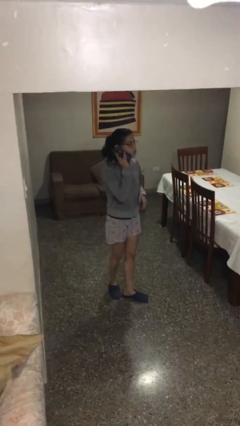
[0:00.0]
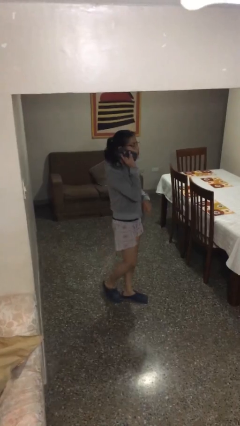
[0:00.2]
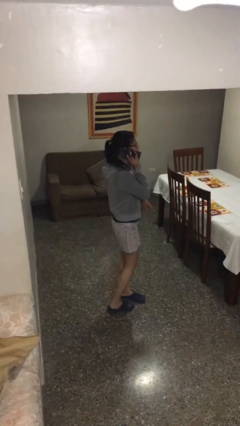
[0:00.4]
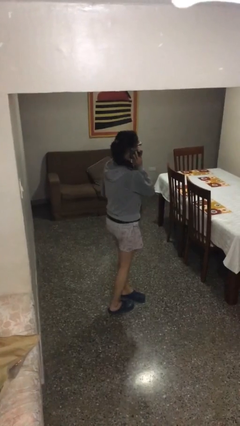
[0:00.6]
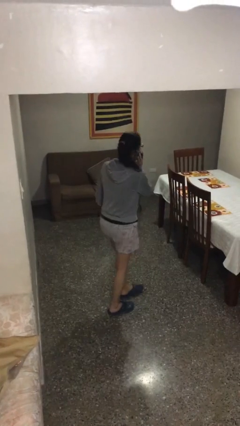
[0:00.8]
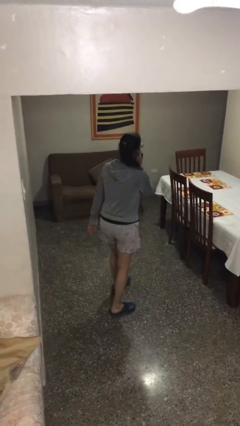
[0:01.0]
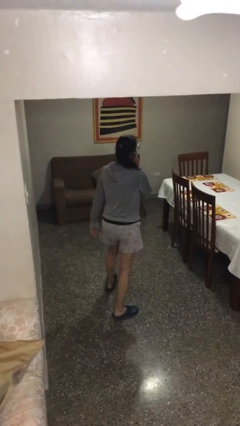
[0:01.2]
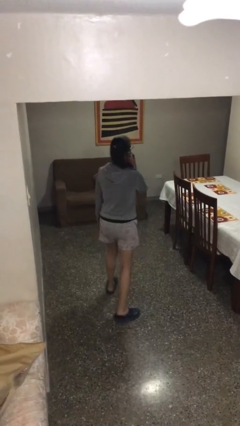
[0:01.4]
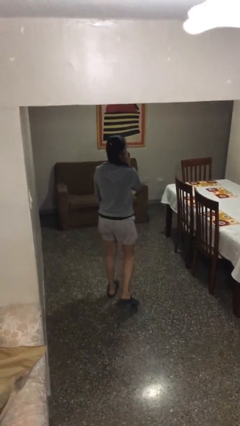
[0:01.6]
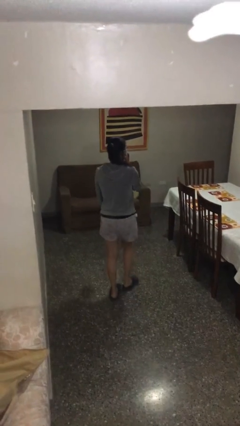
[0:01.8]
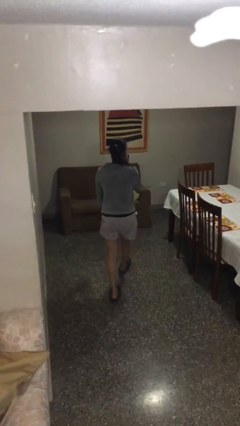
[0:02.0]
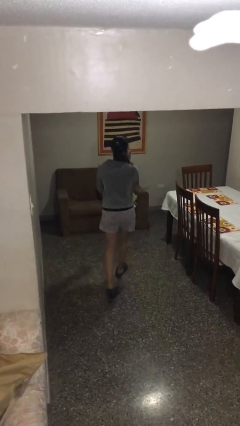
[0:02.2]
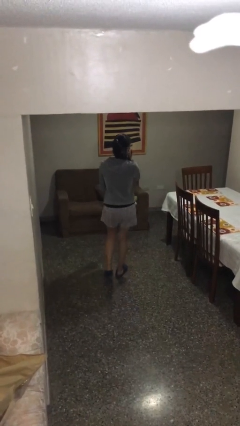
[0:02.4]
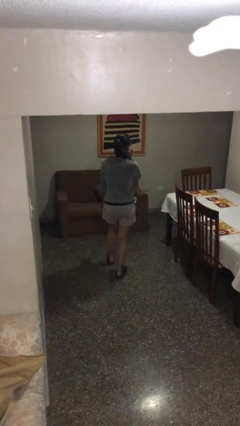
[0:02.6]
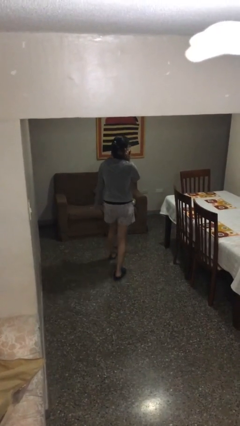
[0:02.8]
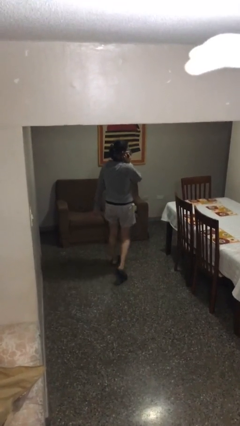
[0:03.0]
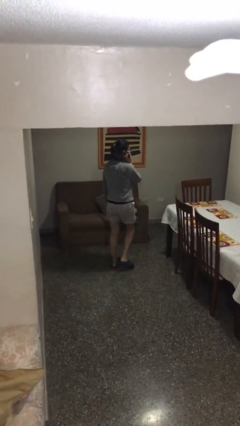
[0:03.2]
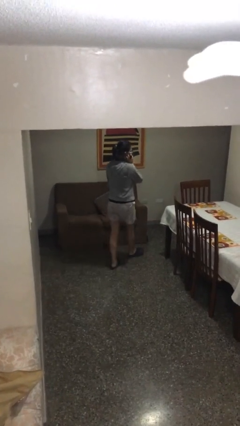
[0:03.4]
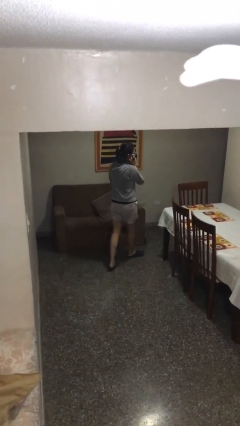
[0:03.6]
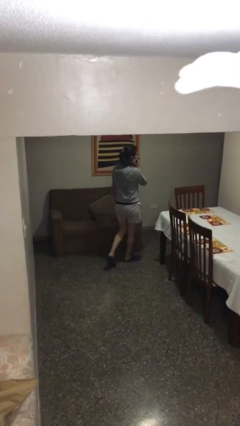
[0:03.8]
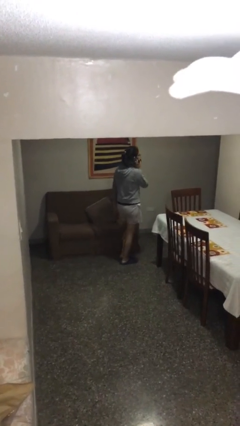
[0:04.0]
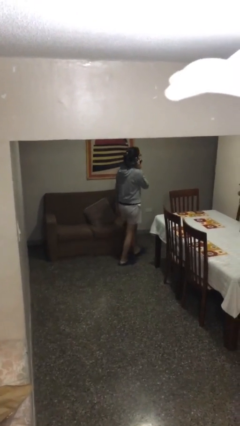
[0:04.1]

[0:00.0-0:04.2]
person talks on phone

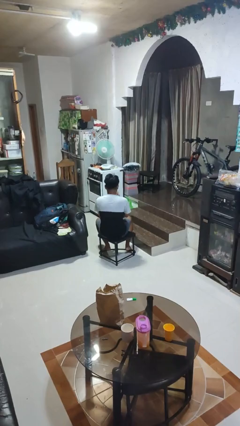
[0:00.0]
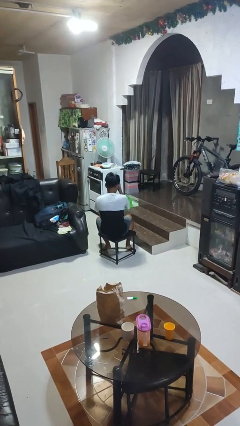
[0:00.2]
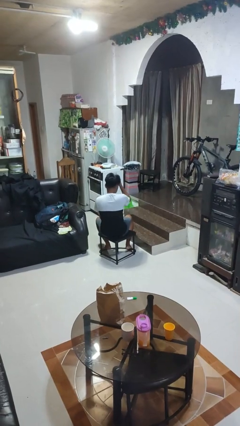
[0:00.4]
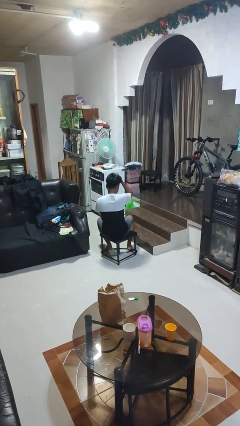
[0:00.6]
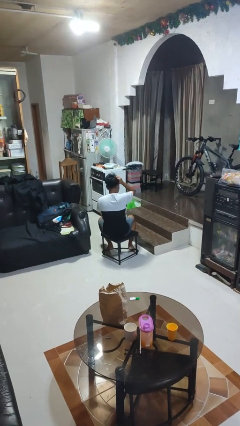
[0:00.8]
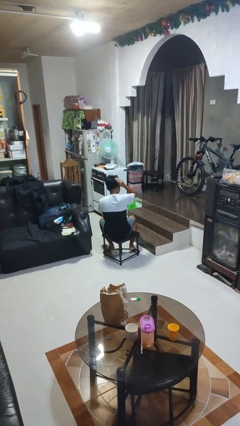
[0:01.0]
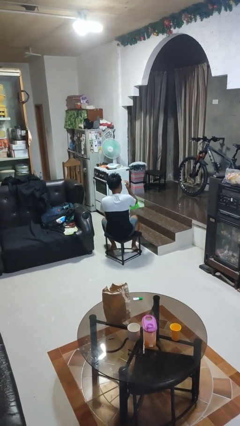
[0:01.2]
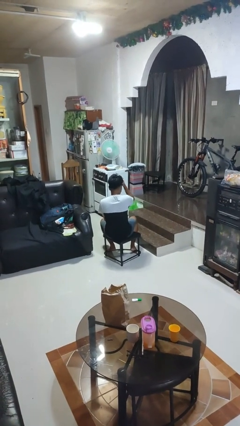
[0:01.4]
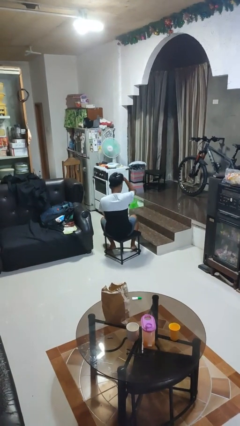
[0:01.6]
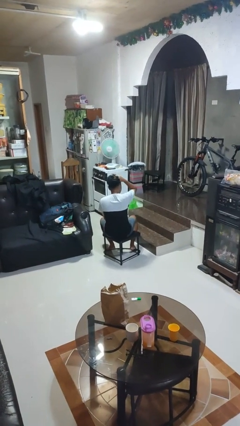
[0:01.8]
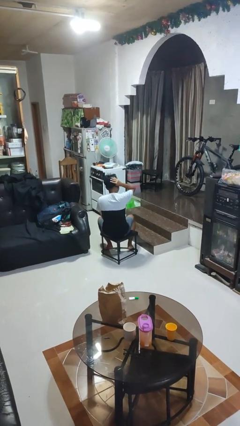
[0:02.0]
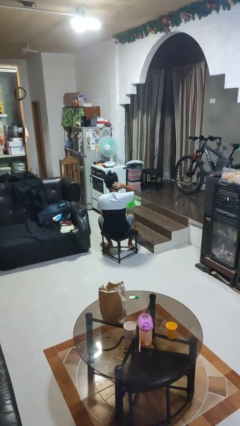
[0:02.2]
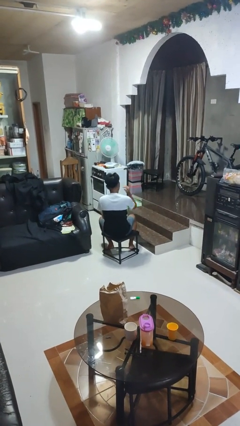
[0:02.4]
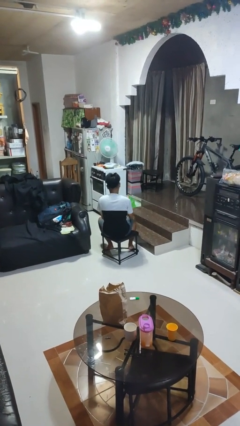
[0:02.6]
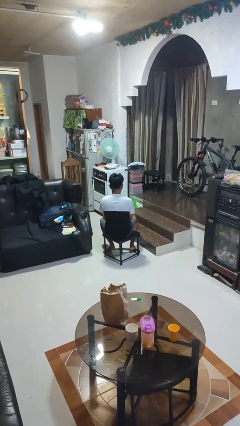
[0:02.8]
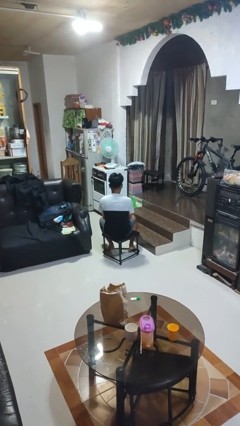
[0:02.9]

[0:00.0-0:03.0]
person strokes hair

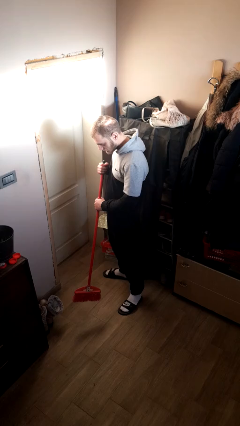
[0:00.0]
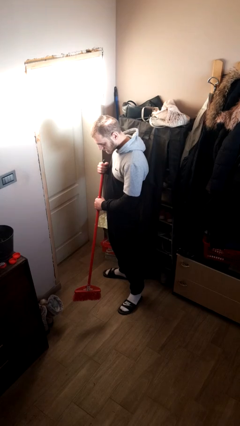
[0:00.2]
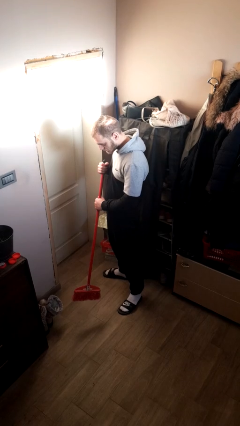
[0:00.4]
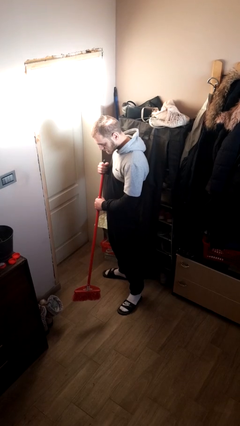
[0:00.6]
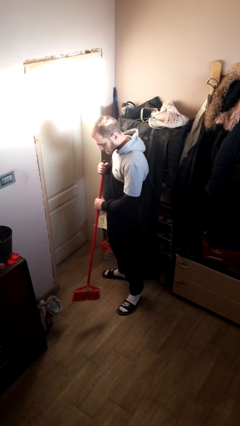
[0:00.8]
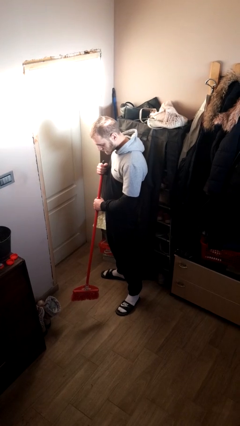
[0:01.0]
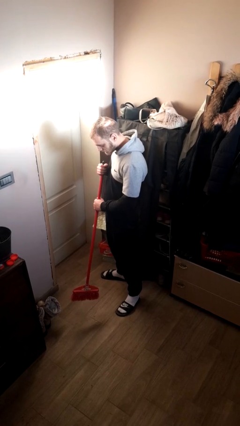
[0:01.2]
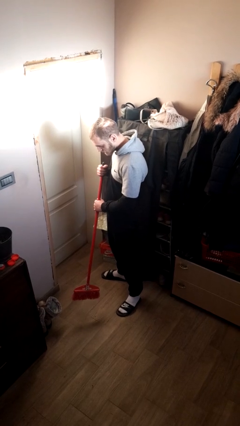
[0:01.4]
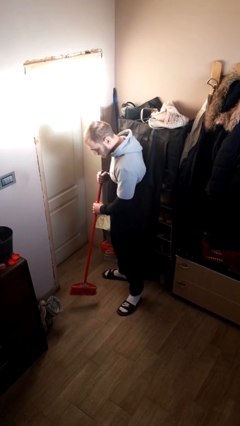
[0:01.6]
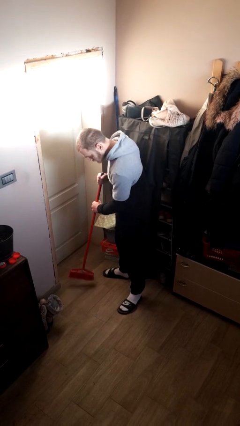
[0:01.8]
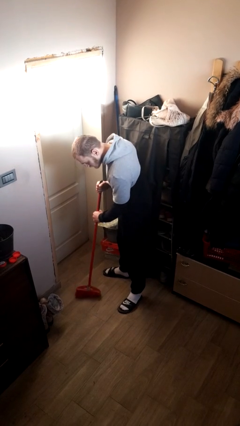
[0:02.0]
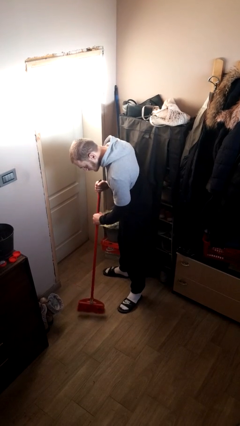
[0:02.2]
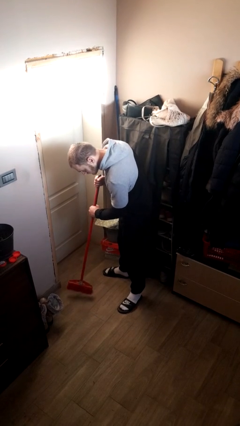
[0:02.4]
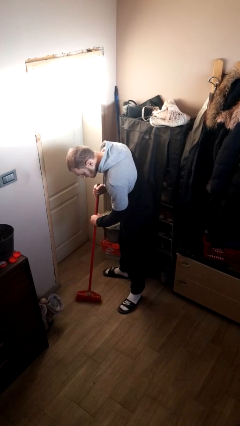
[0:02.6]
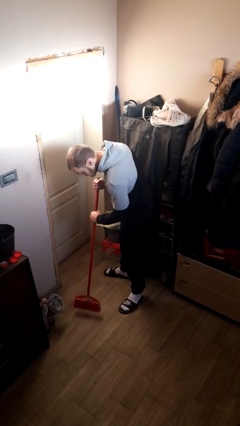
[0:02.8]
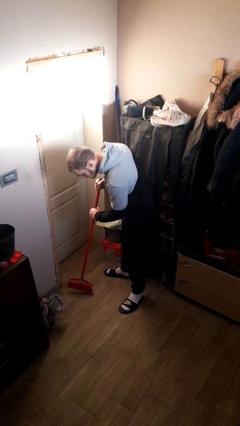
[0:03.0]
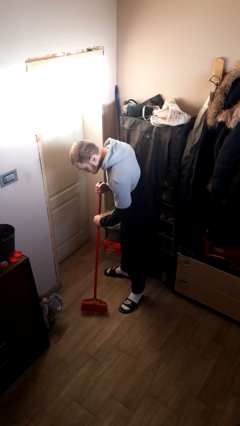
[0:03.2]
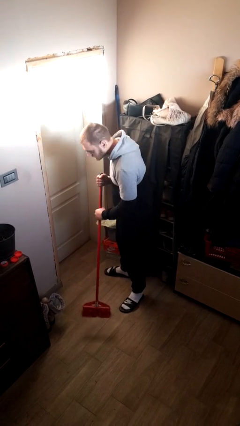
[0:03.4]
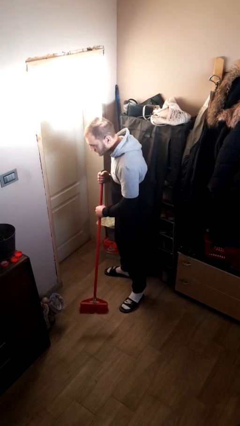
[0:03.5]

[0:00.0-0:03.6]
person sweeps floor

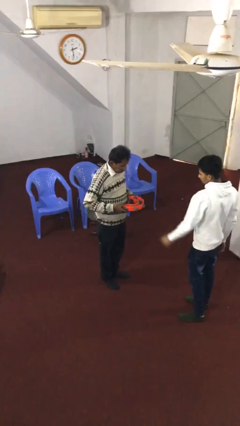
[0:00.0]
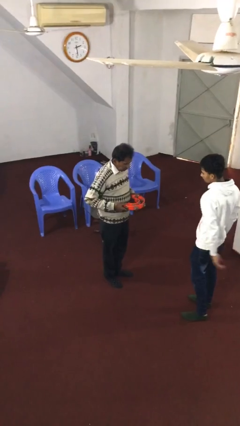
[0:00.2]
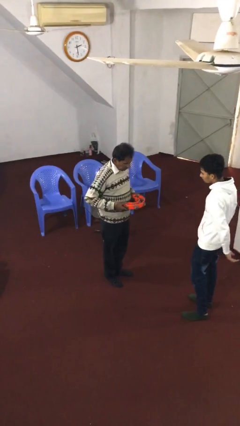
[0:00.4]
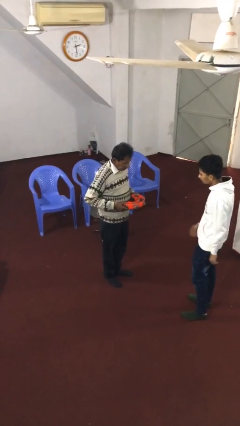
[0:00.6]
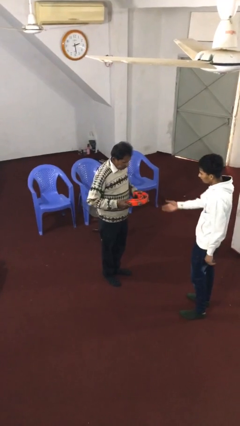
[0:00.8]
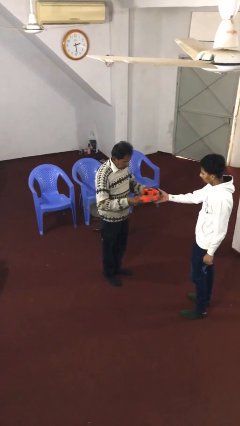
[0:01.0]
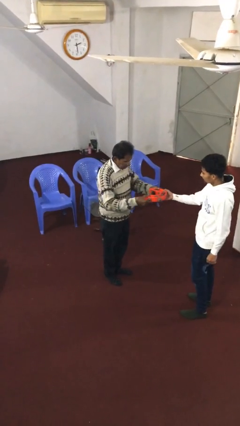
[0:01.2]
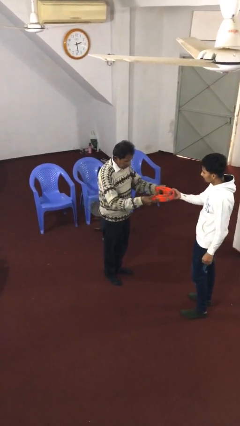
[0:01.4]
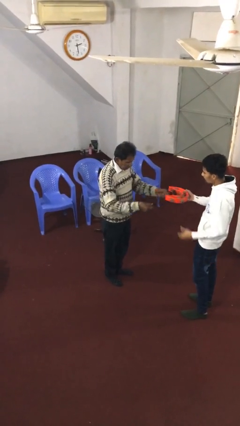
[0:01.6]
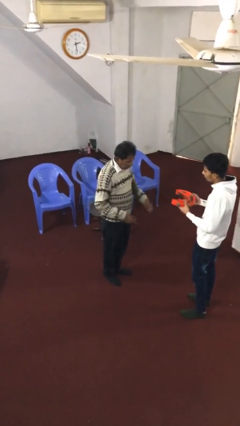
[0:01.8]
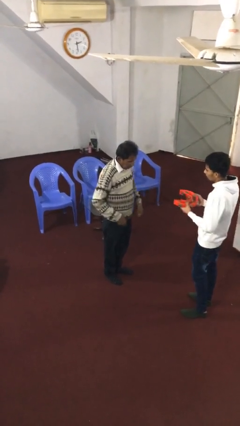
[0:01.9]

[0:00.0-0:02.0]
person transfers object to person

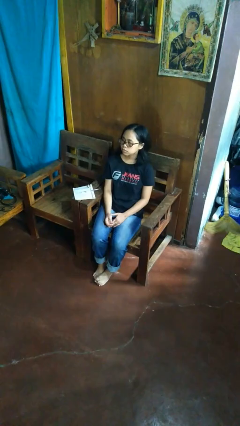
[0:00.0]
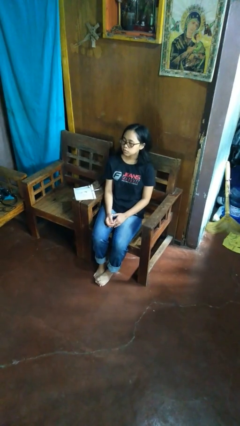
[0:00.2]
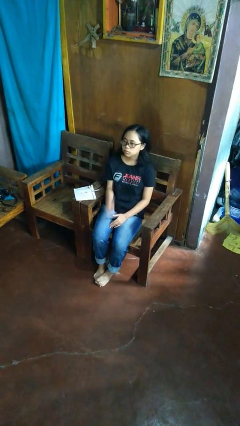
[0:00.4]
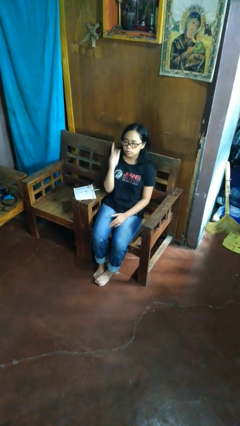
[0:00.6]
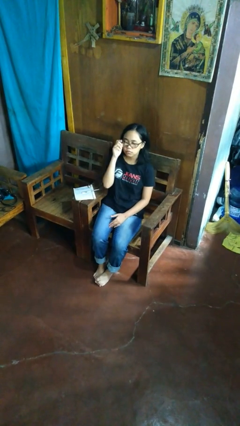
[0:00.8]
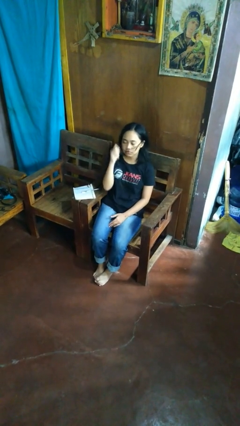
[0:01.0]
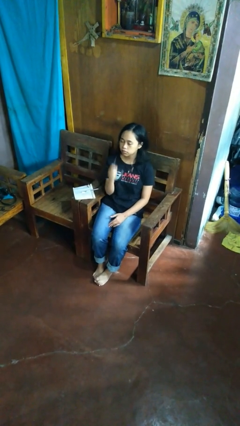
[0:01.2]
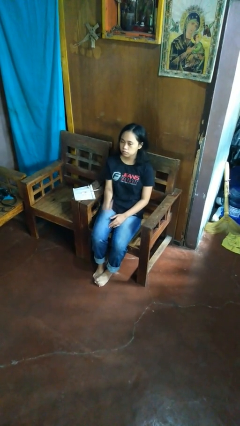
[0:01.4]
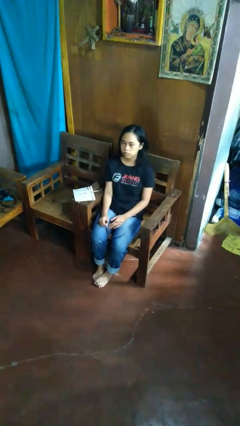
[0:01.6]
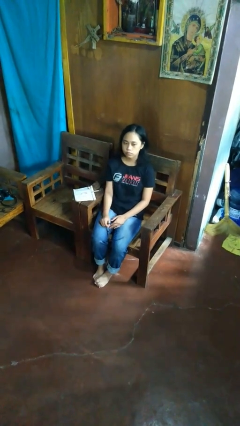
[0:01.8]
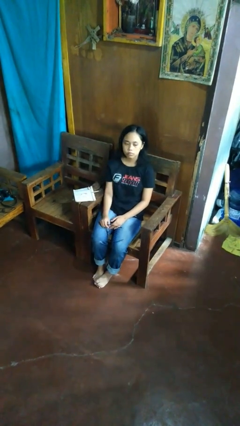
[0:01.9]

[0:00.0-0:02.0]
person takes off glasses

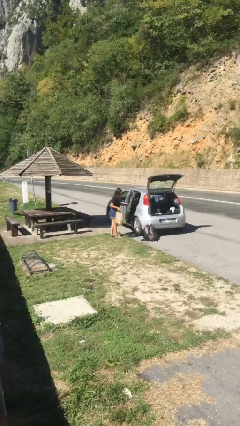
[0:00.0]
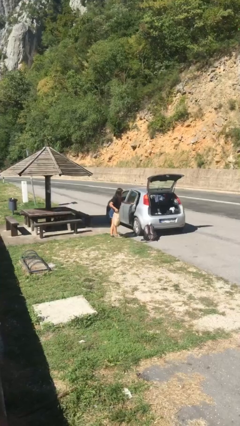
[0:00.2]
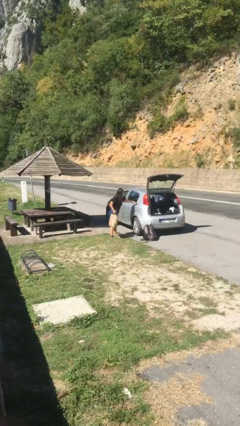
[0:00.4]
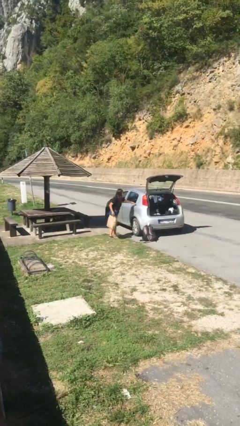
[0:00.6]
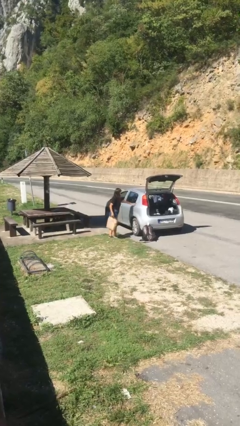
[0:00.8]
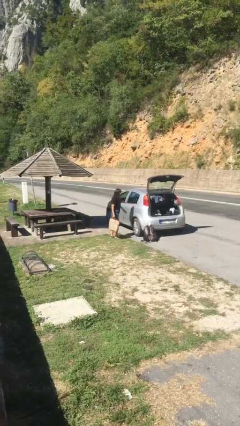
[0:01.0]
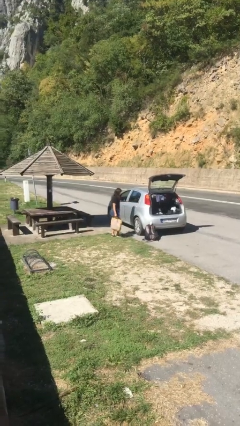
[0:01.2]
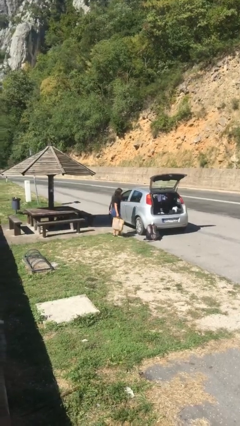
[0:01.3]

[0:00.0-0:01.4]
person closes car door

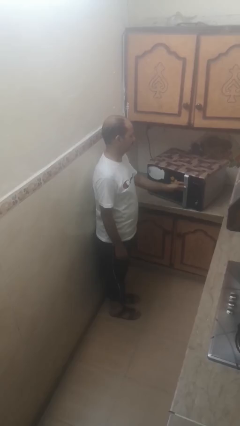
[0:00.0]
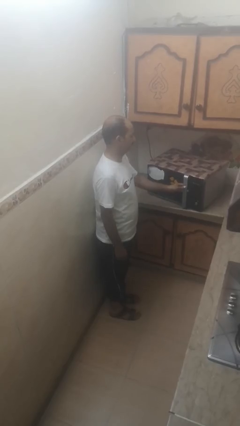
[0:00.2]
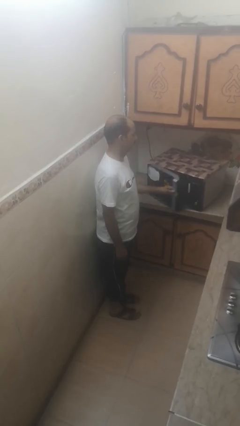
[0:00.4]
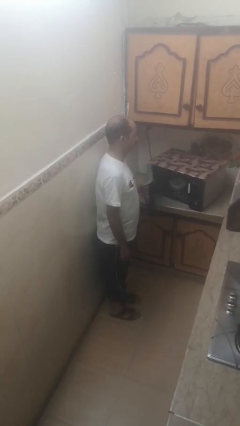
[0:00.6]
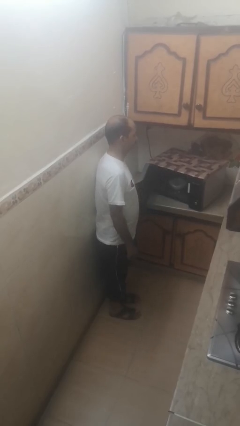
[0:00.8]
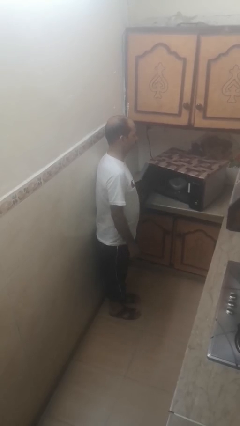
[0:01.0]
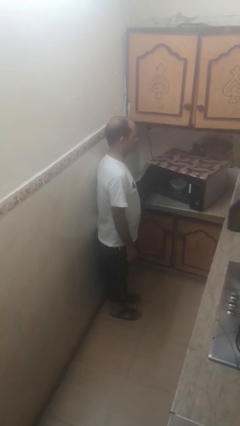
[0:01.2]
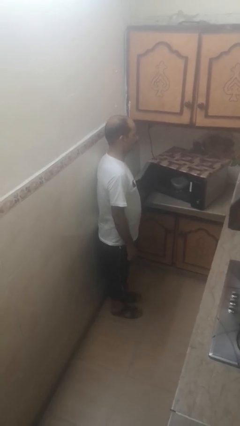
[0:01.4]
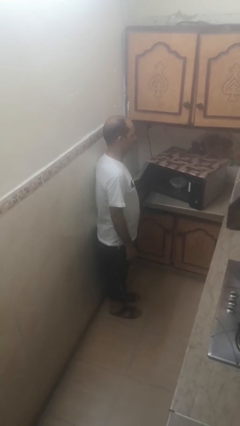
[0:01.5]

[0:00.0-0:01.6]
person opens microwave
